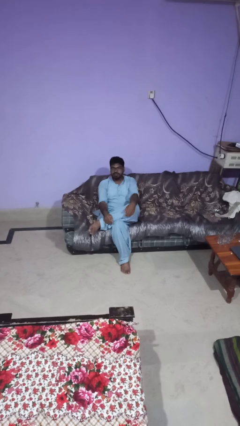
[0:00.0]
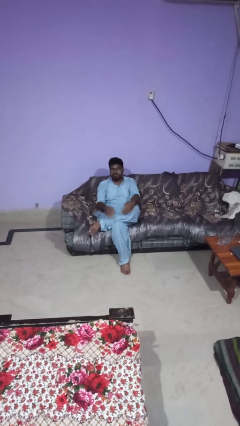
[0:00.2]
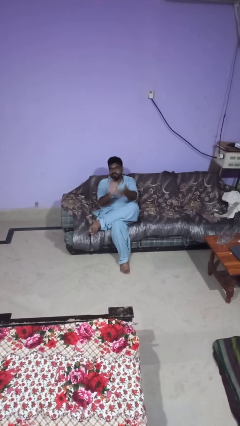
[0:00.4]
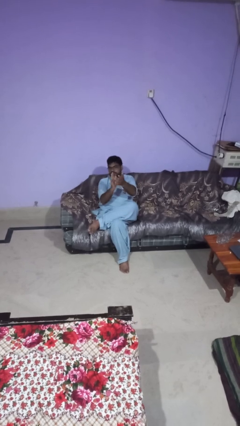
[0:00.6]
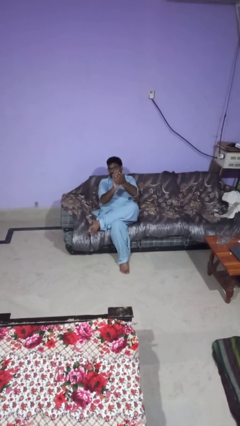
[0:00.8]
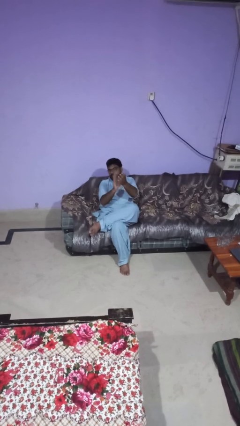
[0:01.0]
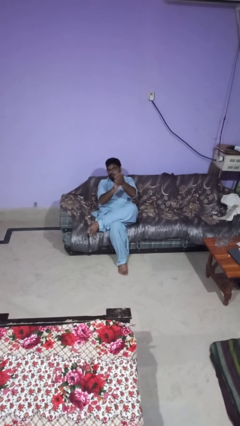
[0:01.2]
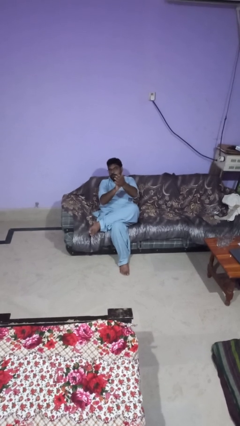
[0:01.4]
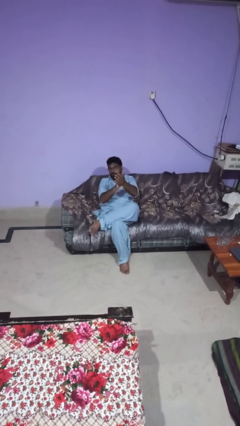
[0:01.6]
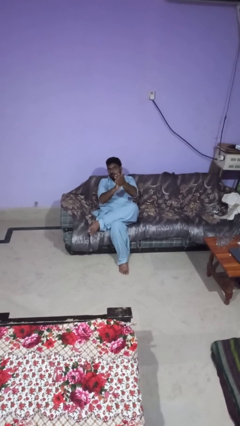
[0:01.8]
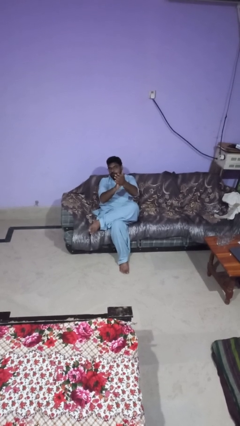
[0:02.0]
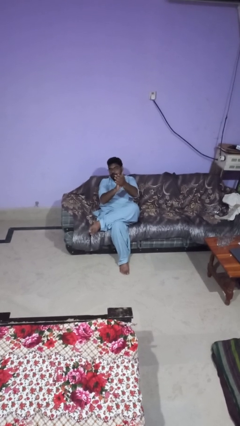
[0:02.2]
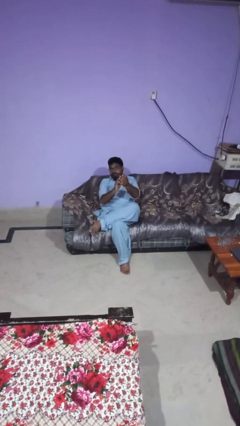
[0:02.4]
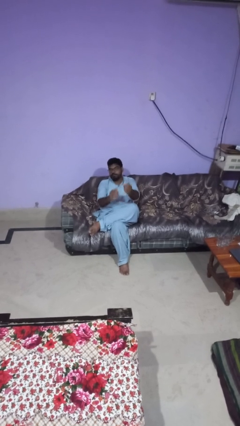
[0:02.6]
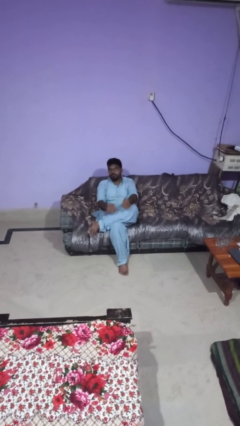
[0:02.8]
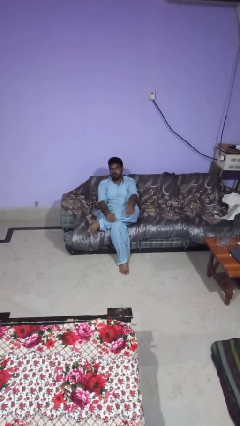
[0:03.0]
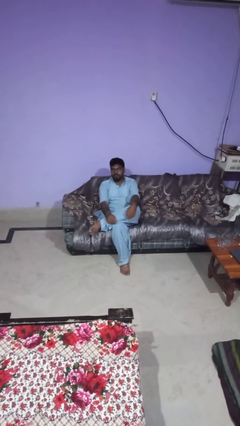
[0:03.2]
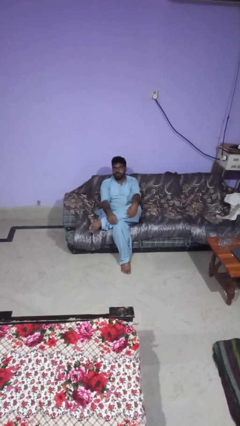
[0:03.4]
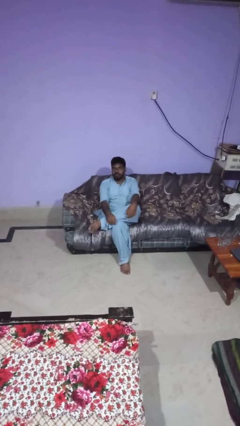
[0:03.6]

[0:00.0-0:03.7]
person claps hands

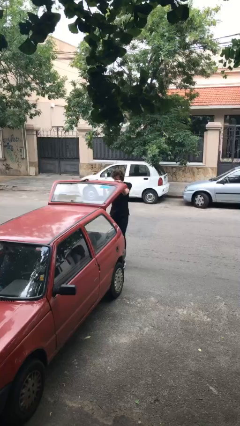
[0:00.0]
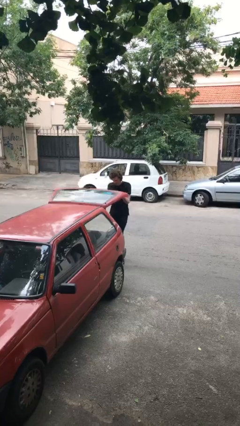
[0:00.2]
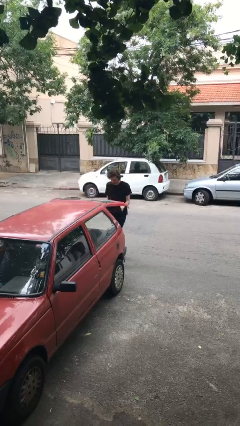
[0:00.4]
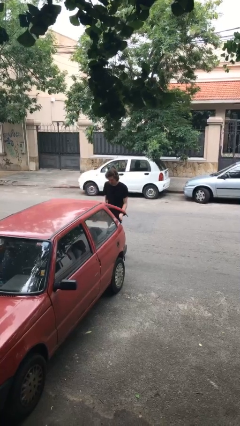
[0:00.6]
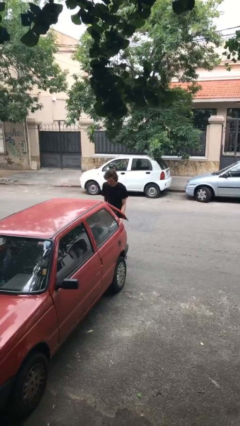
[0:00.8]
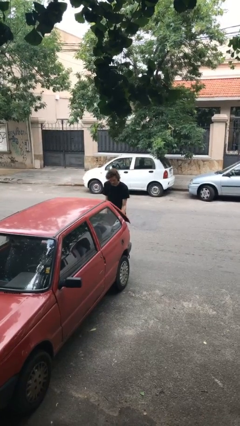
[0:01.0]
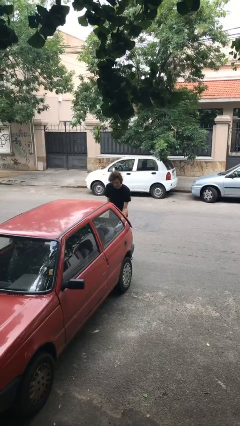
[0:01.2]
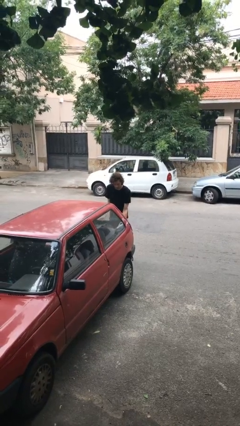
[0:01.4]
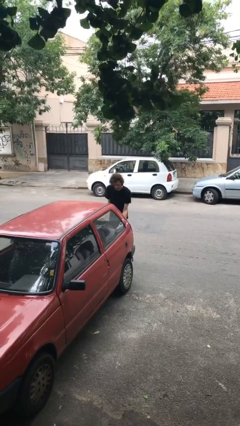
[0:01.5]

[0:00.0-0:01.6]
person closes car trunk

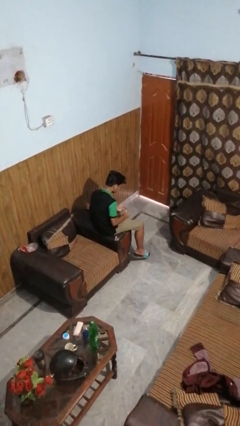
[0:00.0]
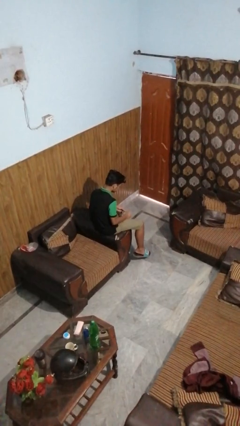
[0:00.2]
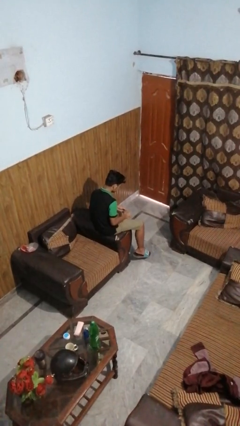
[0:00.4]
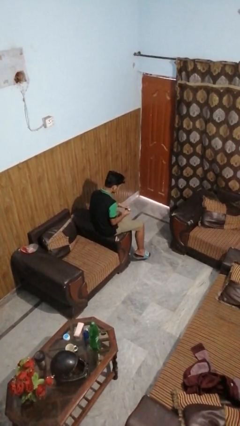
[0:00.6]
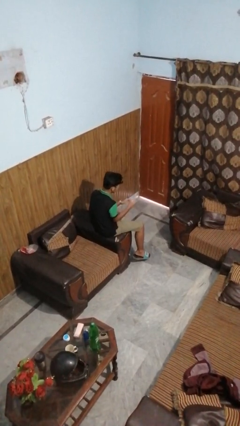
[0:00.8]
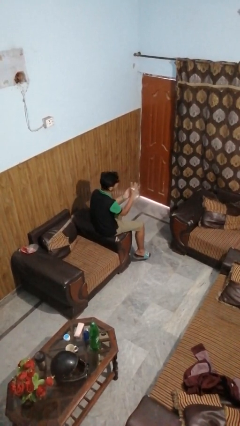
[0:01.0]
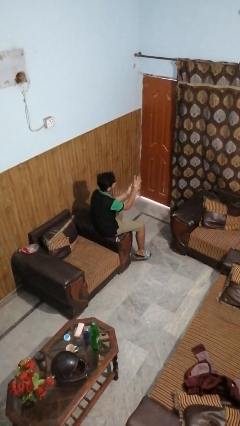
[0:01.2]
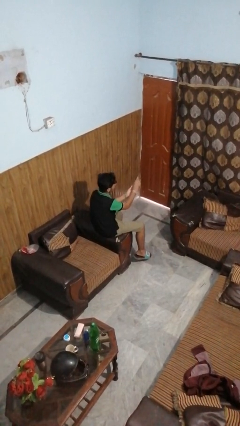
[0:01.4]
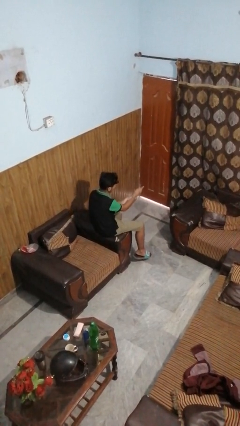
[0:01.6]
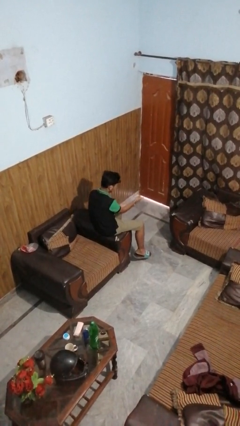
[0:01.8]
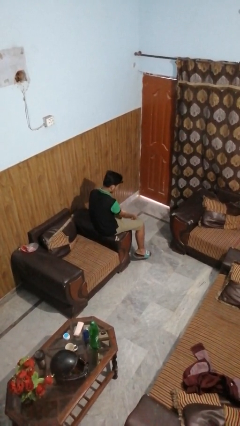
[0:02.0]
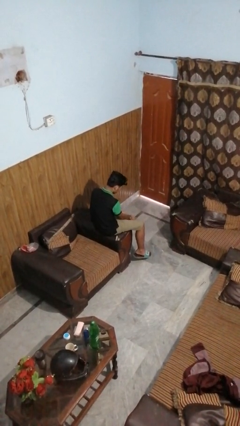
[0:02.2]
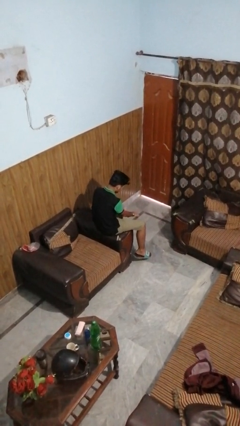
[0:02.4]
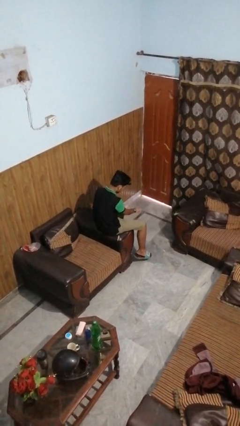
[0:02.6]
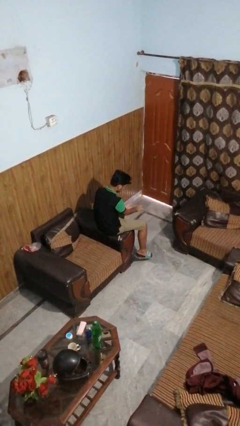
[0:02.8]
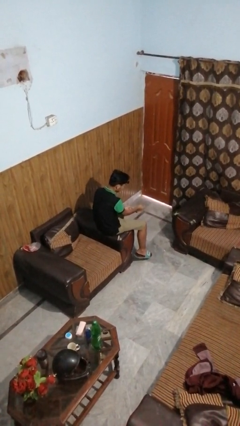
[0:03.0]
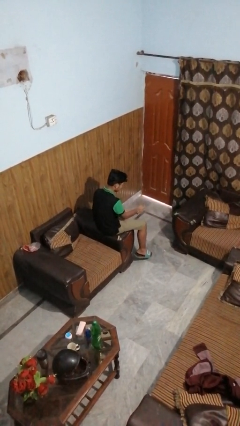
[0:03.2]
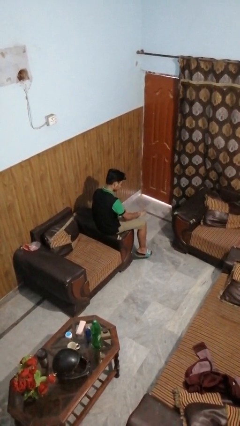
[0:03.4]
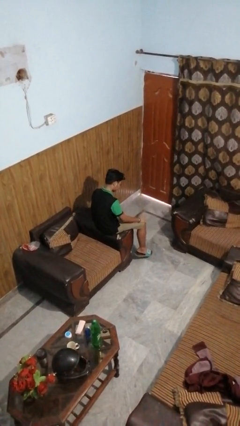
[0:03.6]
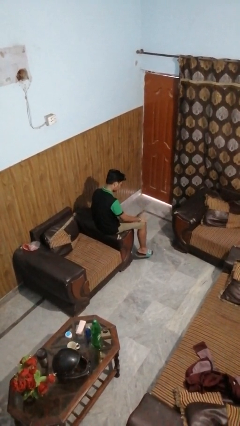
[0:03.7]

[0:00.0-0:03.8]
person puts on wristwatch

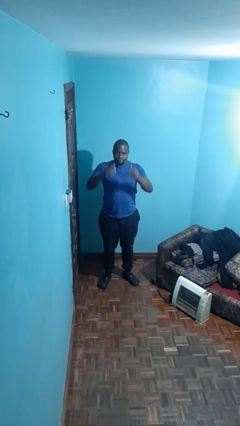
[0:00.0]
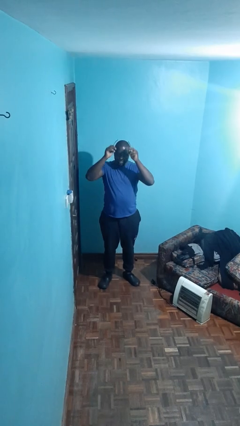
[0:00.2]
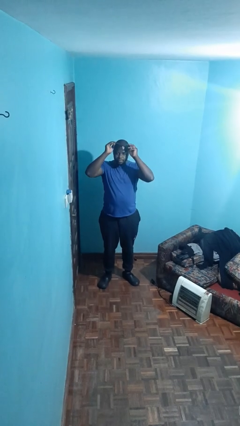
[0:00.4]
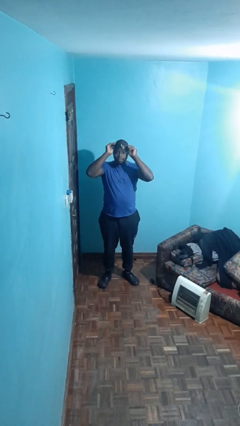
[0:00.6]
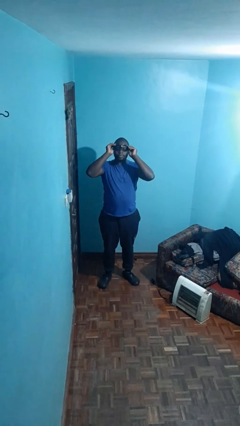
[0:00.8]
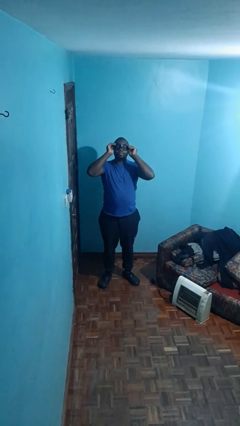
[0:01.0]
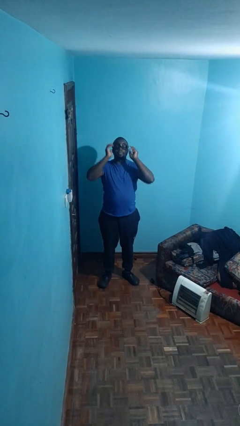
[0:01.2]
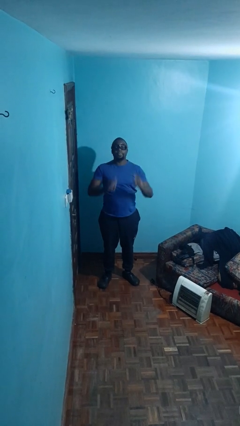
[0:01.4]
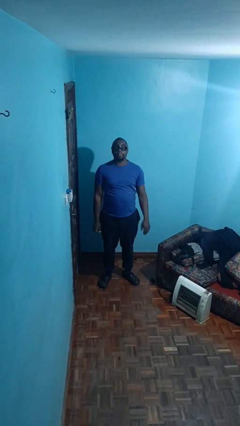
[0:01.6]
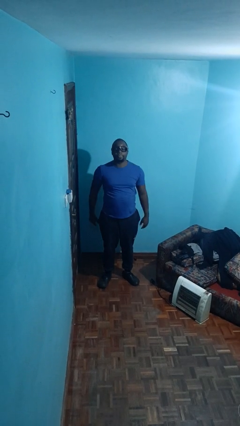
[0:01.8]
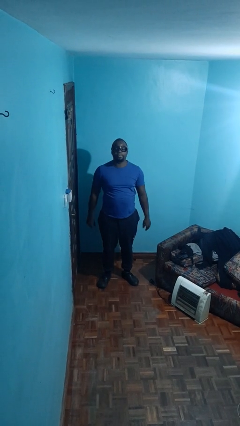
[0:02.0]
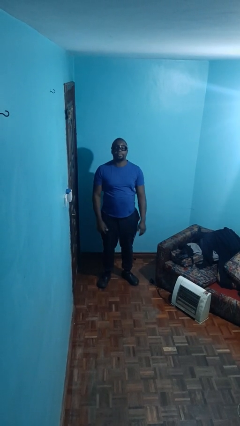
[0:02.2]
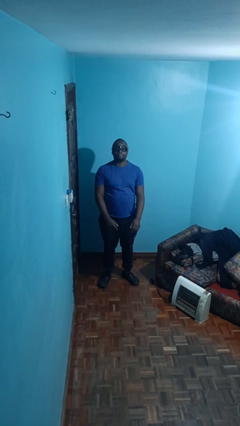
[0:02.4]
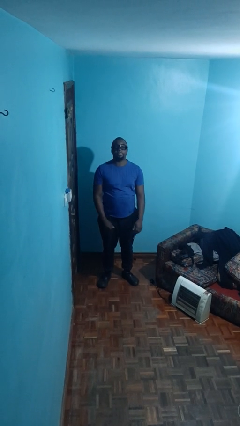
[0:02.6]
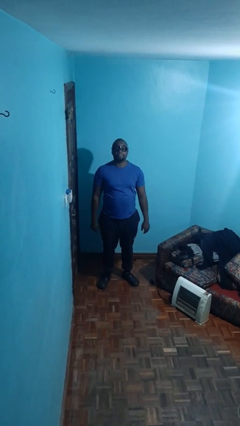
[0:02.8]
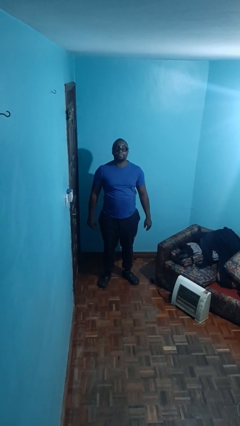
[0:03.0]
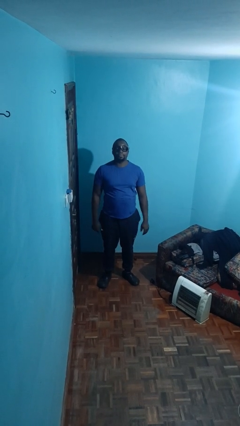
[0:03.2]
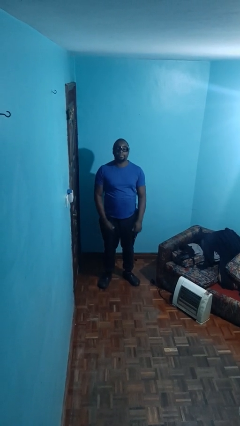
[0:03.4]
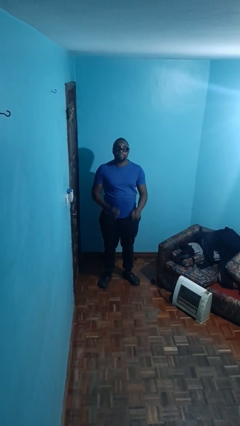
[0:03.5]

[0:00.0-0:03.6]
person puts on glasses

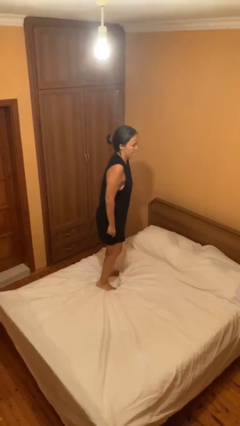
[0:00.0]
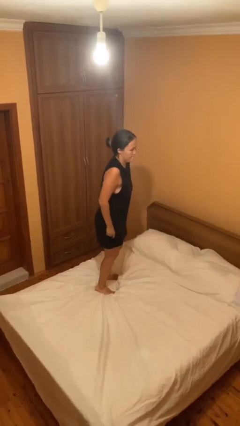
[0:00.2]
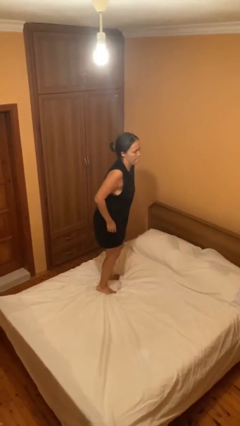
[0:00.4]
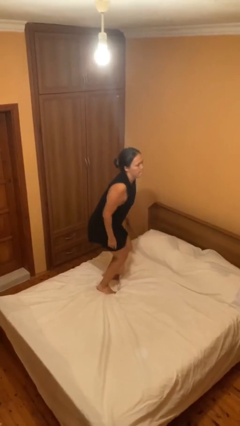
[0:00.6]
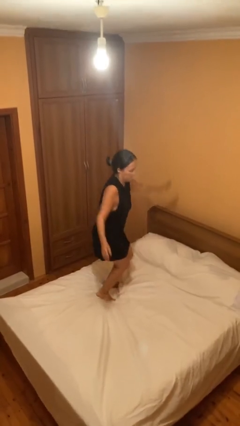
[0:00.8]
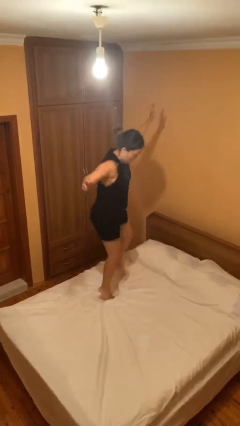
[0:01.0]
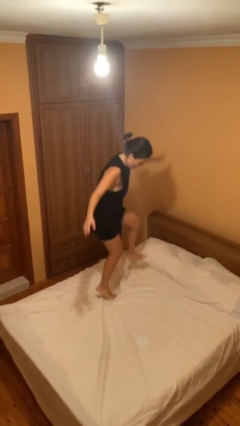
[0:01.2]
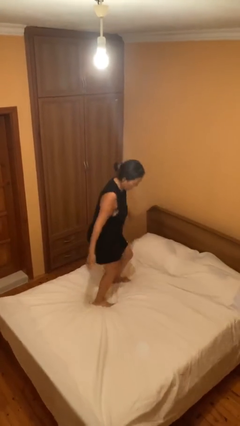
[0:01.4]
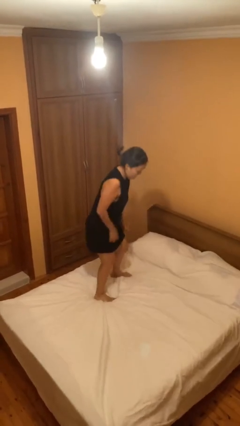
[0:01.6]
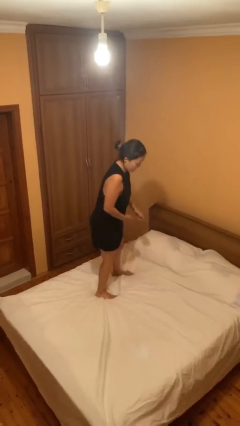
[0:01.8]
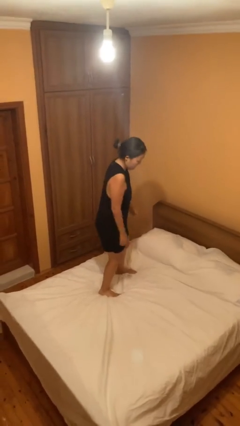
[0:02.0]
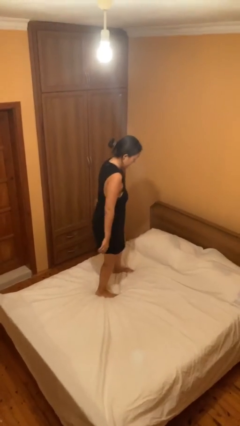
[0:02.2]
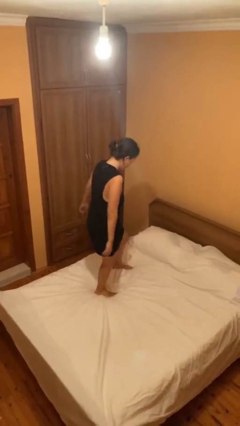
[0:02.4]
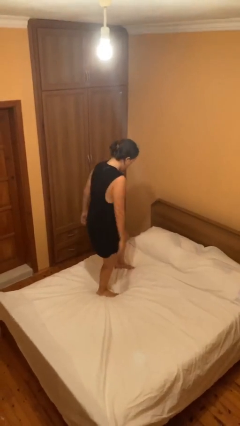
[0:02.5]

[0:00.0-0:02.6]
person jumps on bed

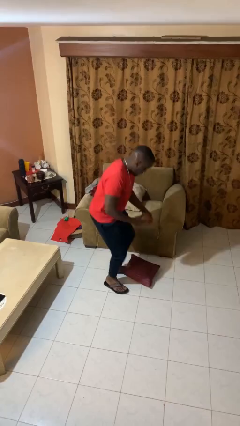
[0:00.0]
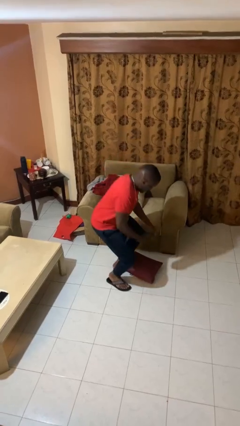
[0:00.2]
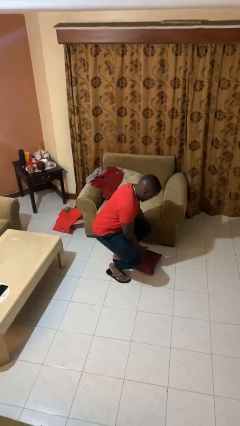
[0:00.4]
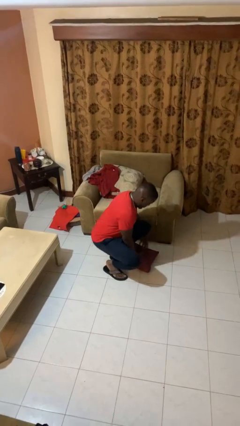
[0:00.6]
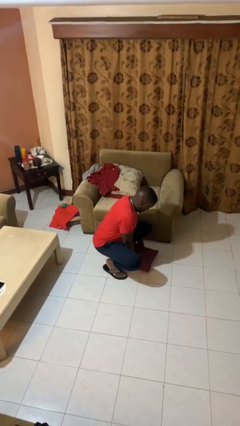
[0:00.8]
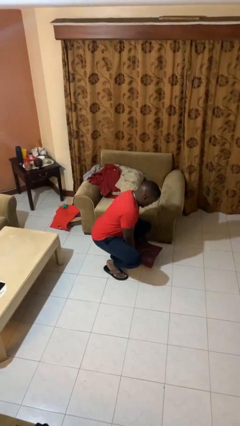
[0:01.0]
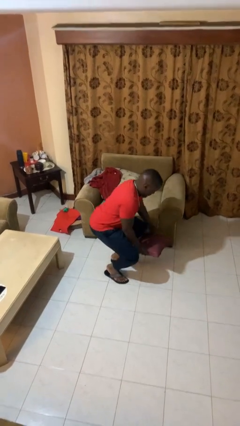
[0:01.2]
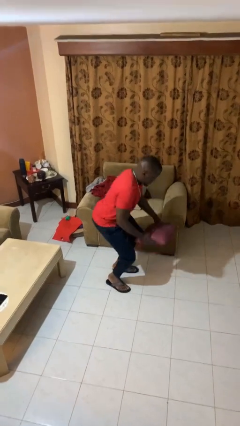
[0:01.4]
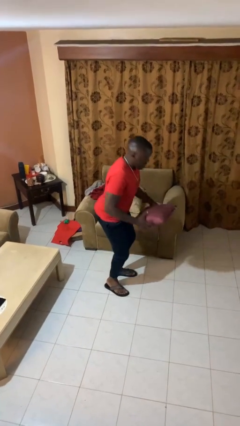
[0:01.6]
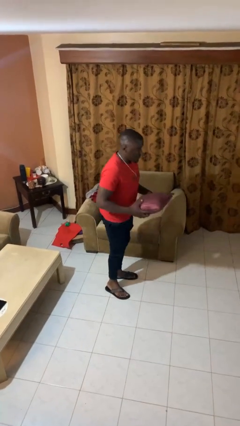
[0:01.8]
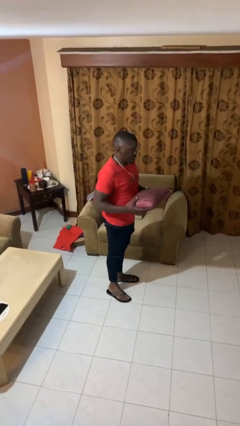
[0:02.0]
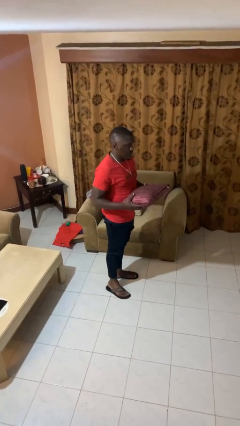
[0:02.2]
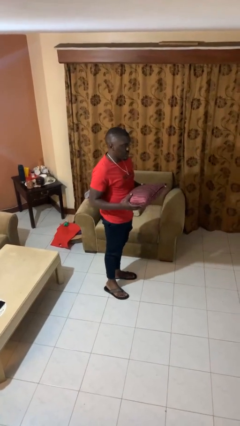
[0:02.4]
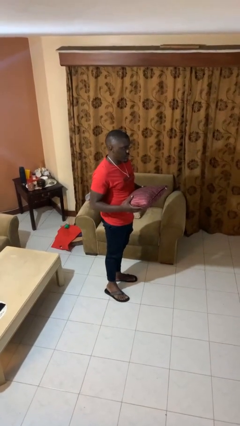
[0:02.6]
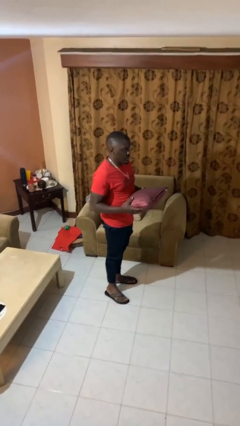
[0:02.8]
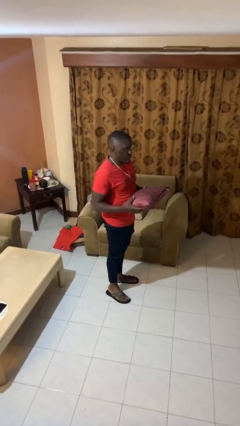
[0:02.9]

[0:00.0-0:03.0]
person picks up object from floor
